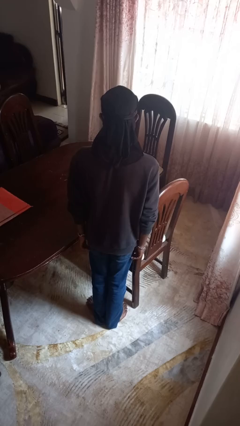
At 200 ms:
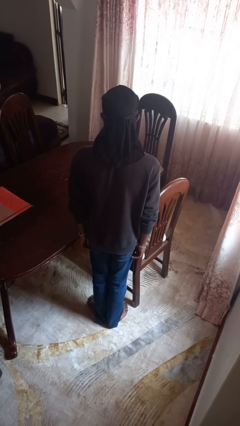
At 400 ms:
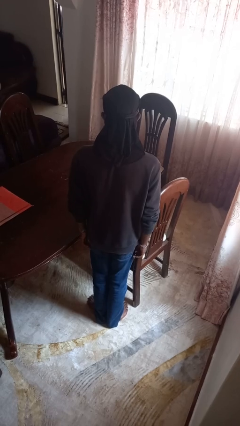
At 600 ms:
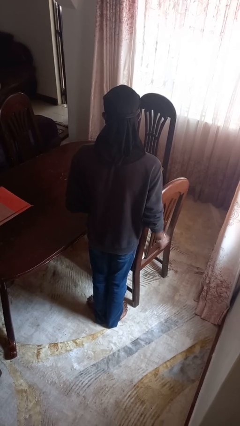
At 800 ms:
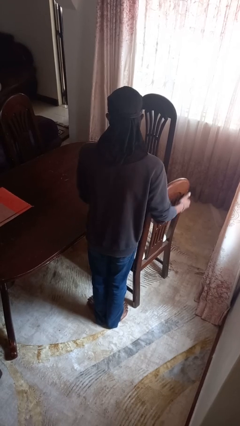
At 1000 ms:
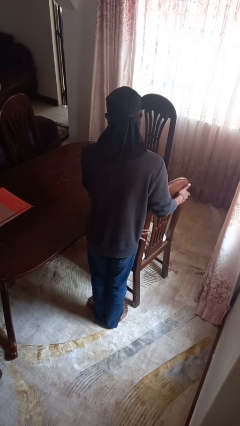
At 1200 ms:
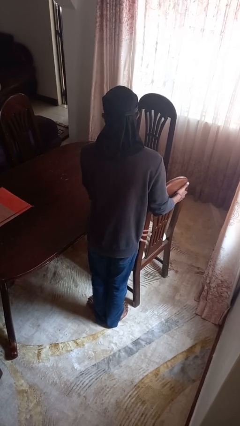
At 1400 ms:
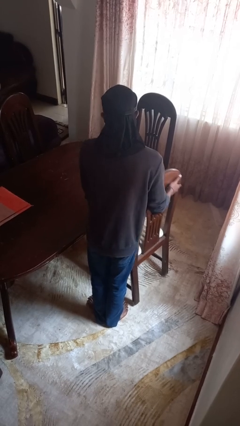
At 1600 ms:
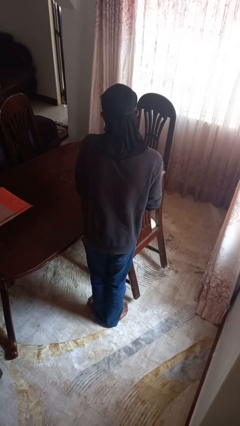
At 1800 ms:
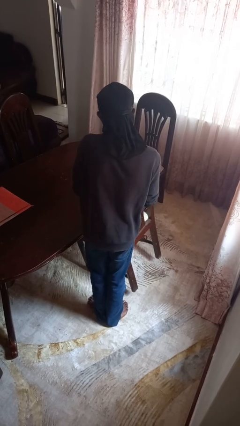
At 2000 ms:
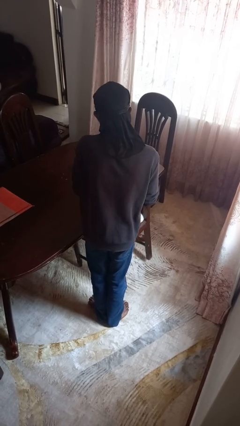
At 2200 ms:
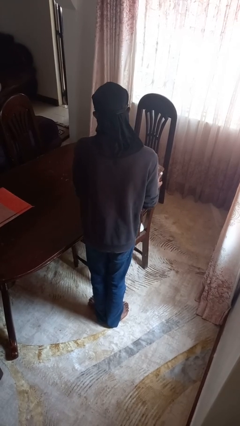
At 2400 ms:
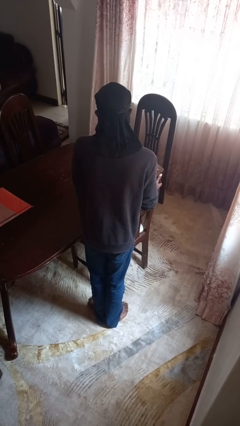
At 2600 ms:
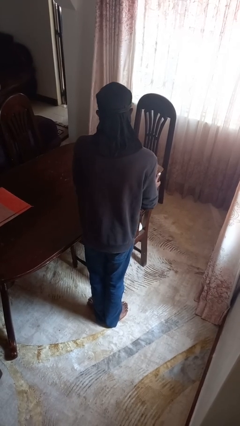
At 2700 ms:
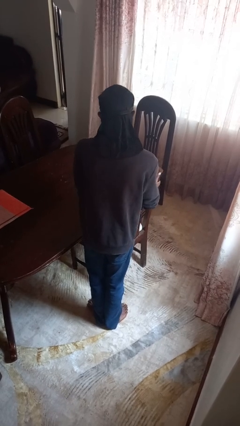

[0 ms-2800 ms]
person pushes in chair

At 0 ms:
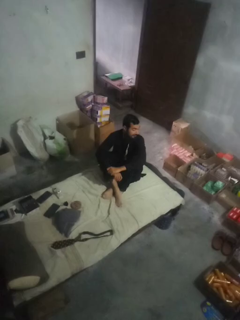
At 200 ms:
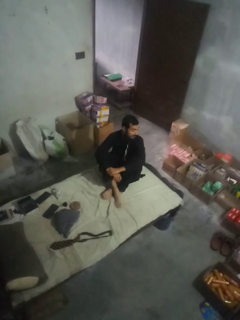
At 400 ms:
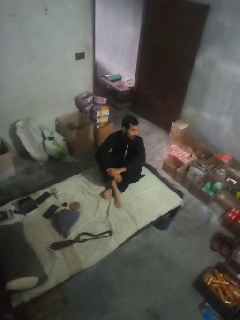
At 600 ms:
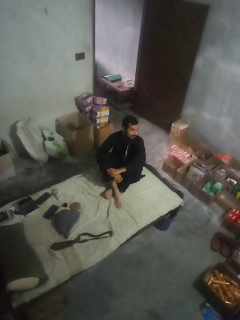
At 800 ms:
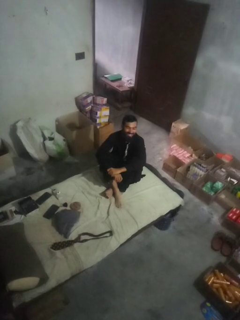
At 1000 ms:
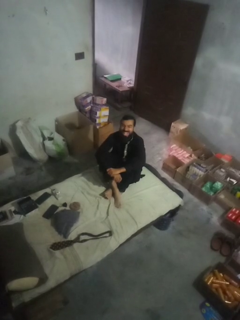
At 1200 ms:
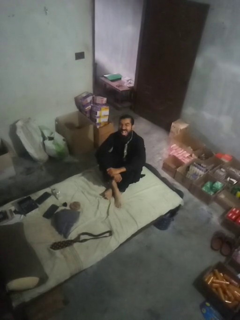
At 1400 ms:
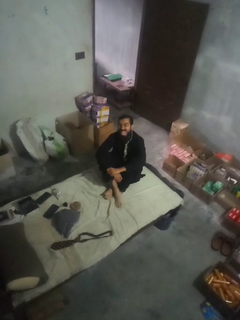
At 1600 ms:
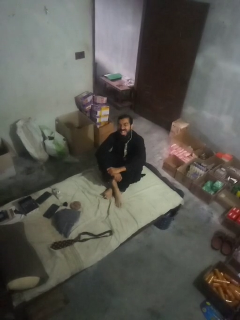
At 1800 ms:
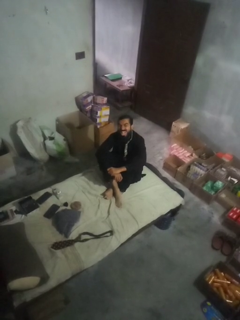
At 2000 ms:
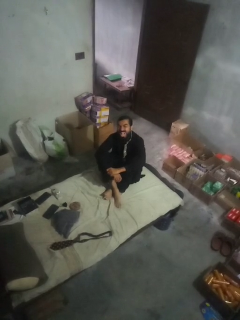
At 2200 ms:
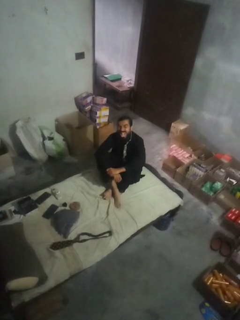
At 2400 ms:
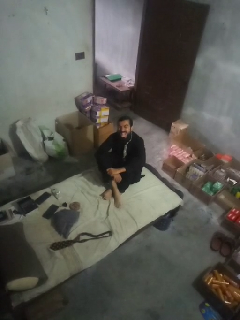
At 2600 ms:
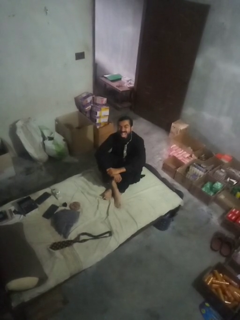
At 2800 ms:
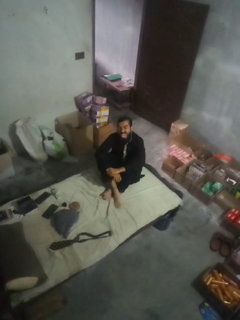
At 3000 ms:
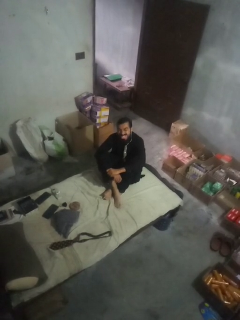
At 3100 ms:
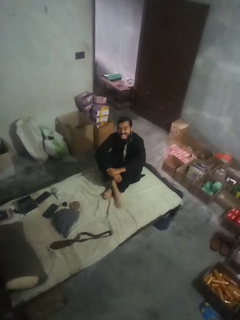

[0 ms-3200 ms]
person sticks out tongue

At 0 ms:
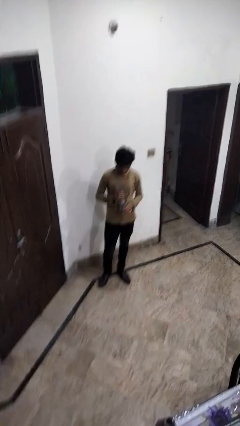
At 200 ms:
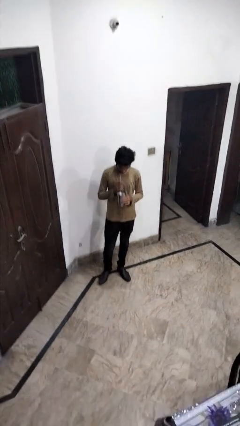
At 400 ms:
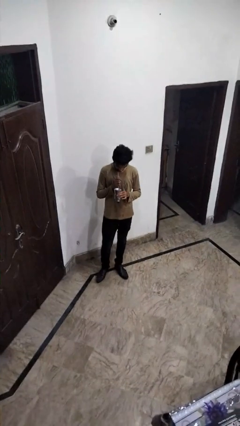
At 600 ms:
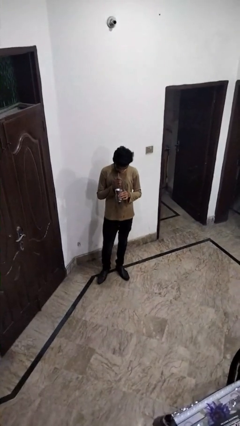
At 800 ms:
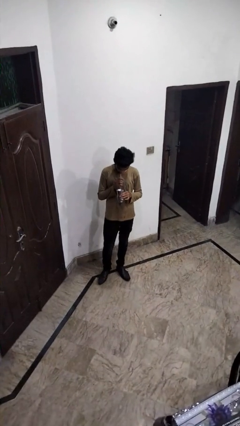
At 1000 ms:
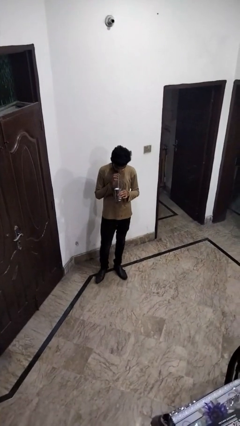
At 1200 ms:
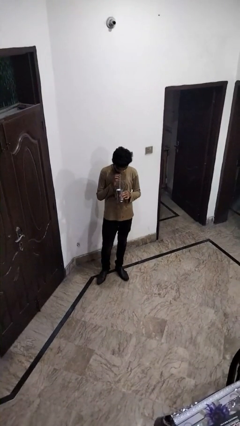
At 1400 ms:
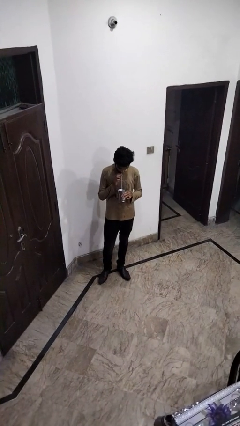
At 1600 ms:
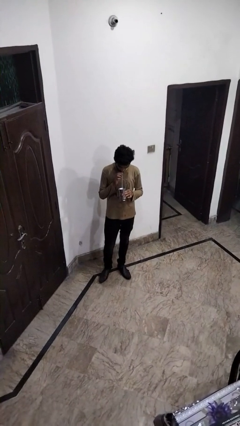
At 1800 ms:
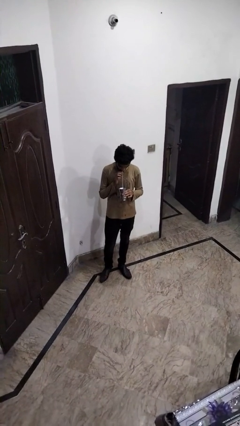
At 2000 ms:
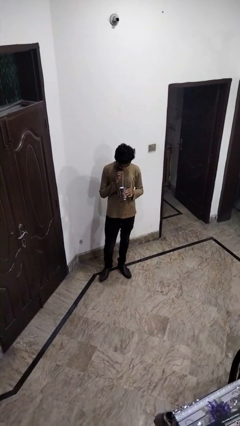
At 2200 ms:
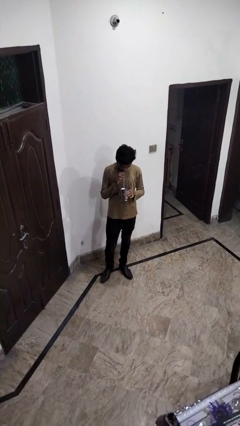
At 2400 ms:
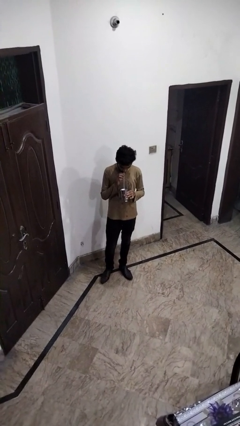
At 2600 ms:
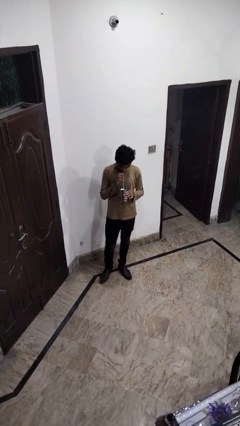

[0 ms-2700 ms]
person drinks from straw

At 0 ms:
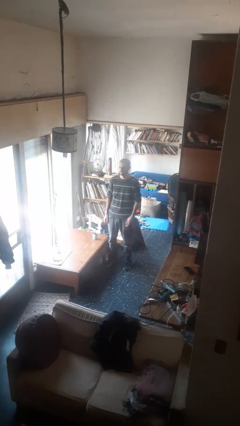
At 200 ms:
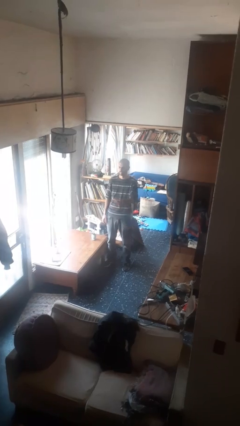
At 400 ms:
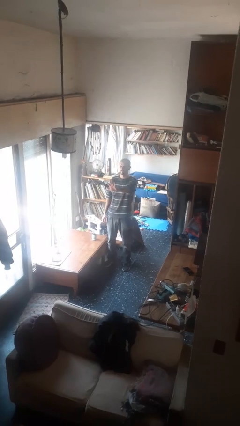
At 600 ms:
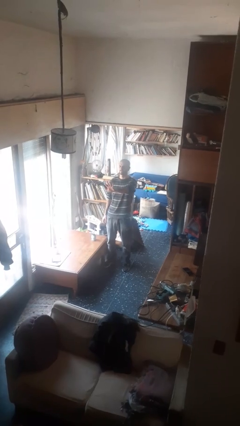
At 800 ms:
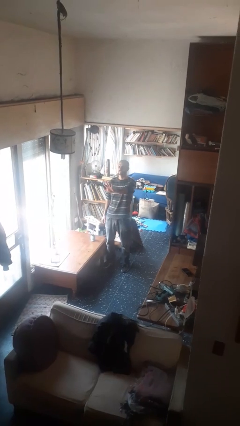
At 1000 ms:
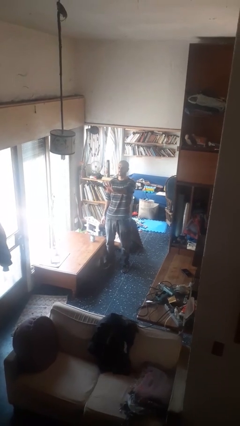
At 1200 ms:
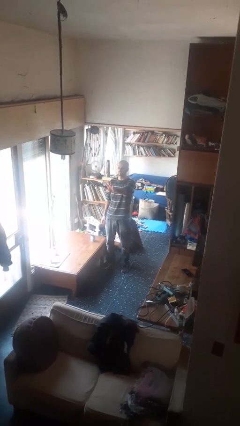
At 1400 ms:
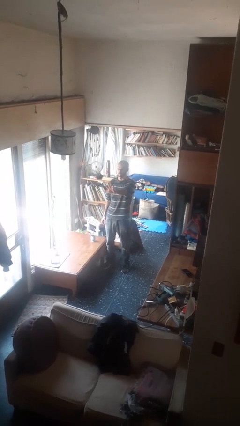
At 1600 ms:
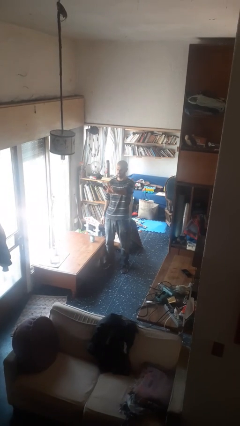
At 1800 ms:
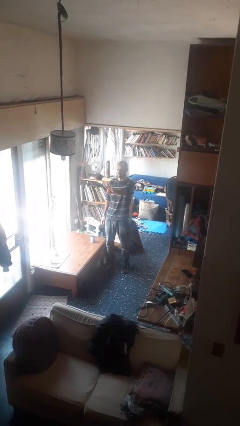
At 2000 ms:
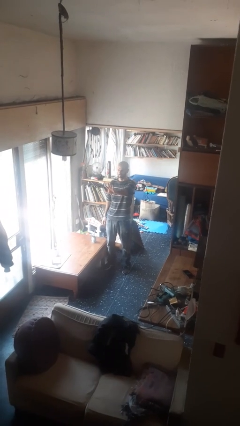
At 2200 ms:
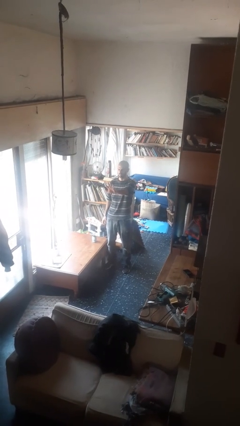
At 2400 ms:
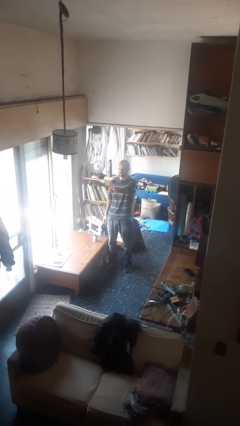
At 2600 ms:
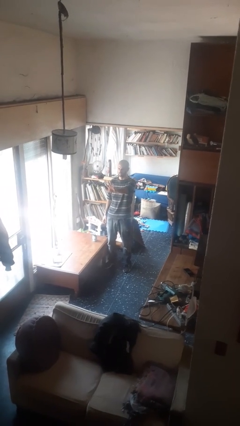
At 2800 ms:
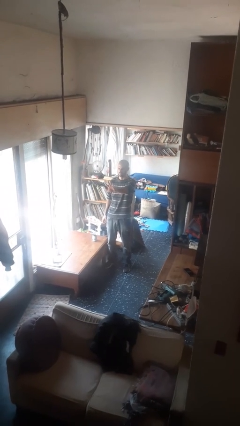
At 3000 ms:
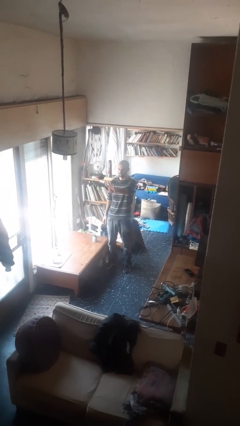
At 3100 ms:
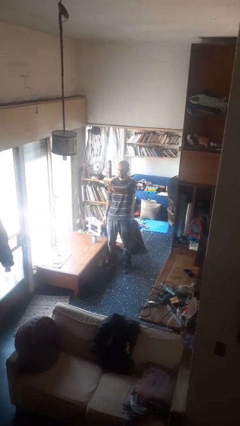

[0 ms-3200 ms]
person gestures number five

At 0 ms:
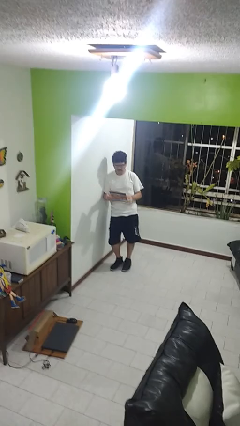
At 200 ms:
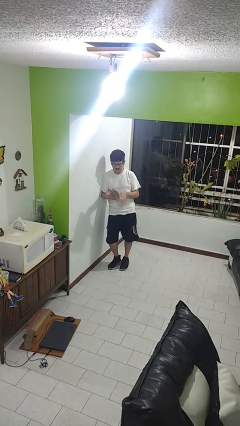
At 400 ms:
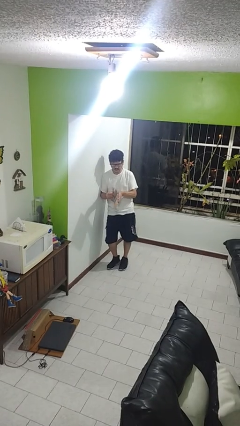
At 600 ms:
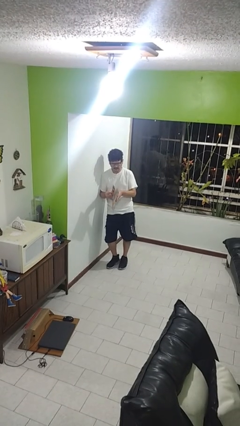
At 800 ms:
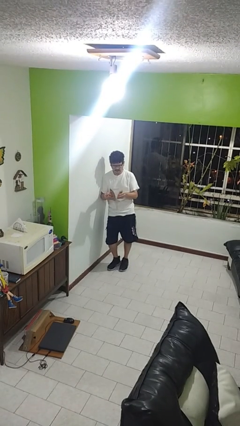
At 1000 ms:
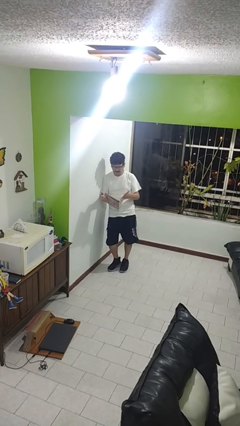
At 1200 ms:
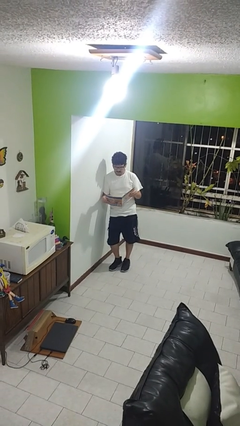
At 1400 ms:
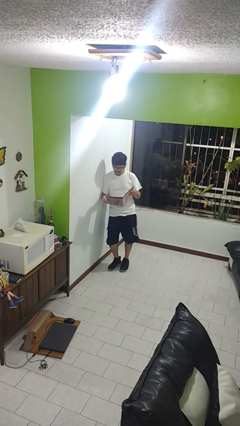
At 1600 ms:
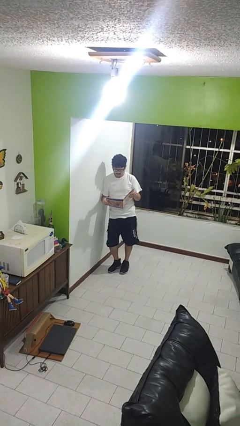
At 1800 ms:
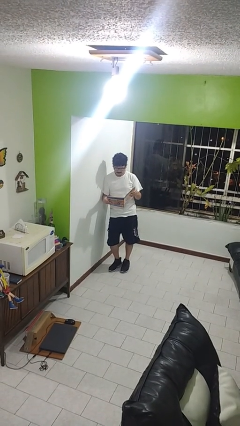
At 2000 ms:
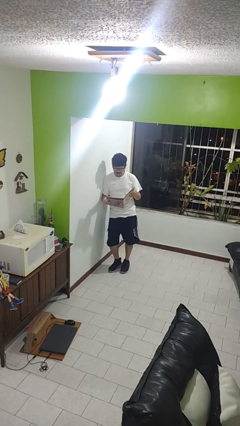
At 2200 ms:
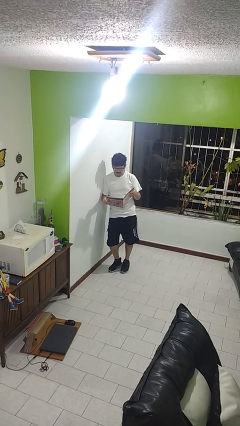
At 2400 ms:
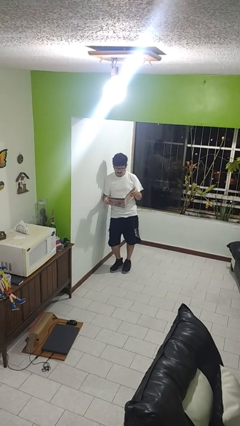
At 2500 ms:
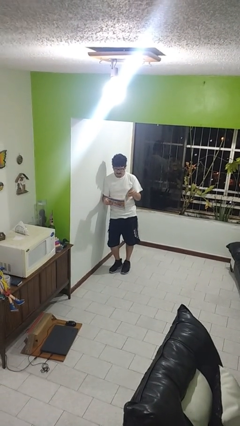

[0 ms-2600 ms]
person reads magazine

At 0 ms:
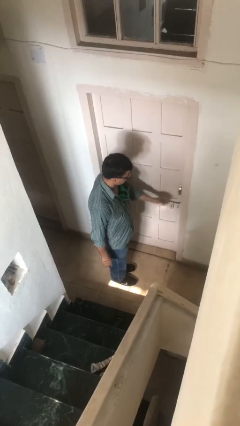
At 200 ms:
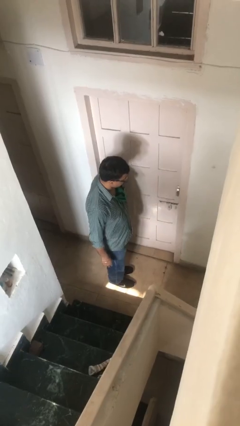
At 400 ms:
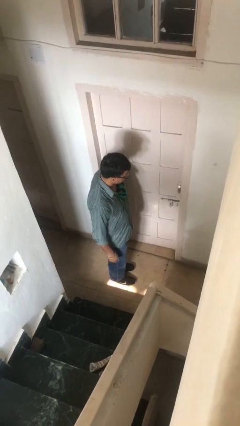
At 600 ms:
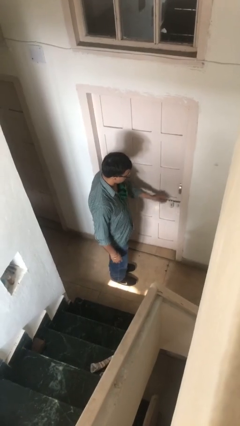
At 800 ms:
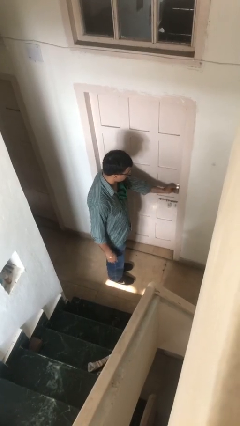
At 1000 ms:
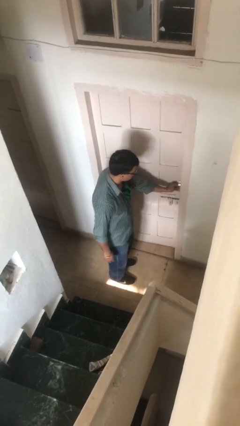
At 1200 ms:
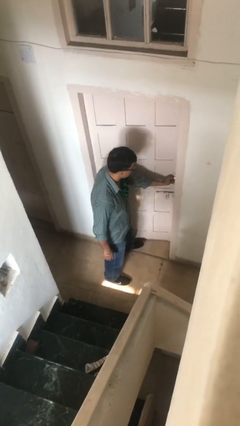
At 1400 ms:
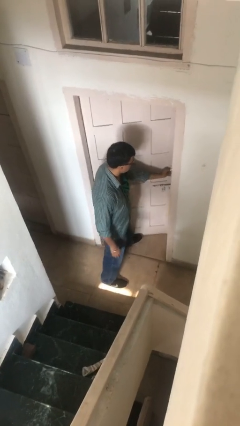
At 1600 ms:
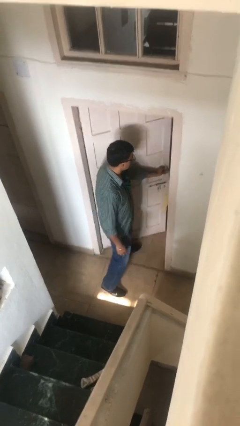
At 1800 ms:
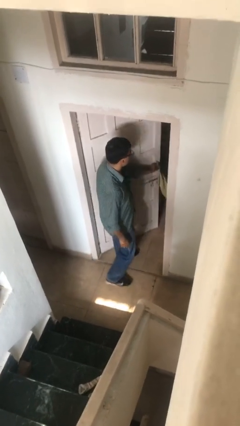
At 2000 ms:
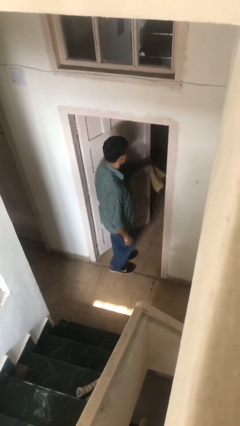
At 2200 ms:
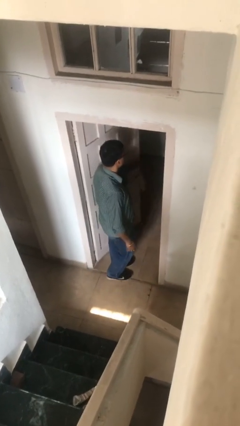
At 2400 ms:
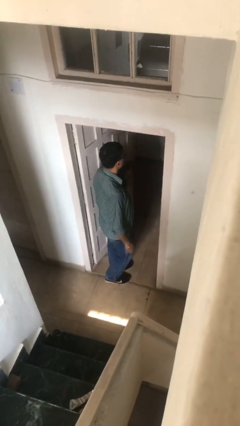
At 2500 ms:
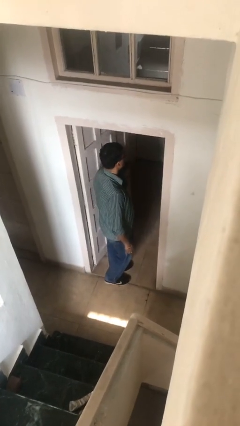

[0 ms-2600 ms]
person opens facility door

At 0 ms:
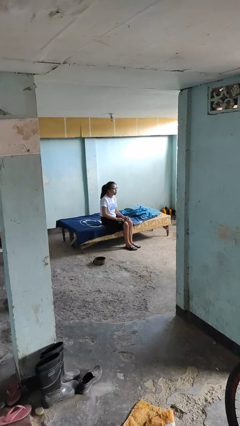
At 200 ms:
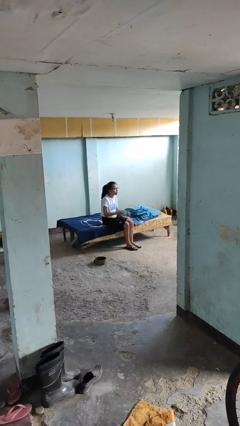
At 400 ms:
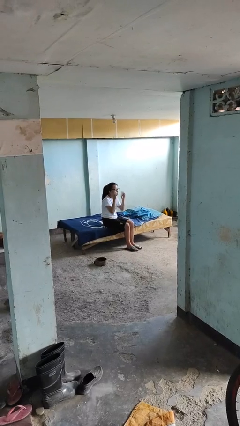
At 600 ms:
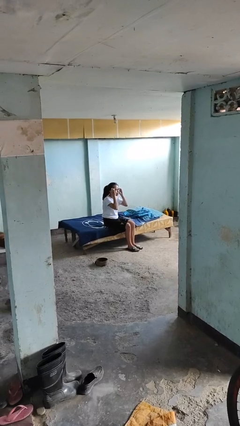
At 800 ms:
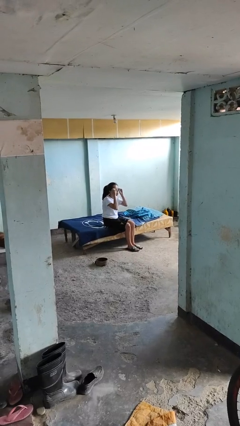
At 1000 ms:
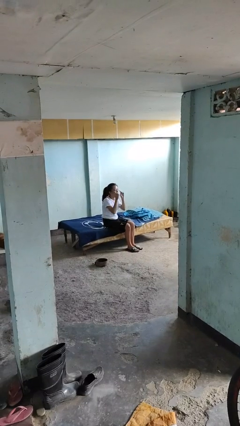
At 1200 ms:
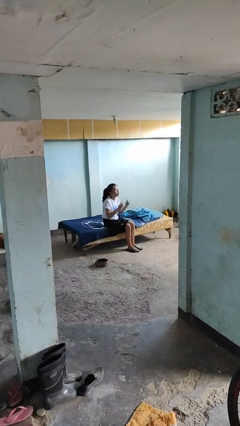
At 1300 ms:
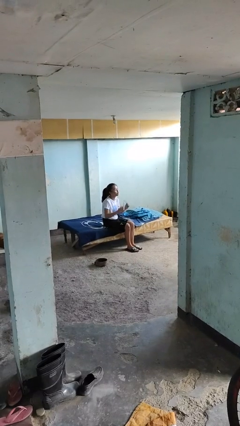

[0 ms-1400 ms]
person takes off glasses
